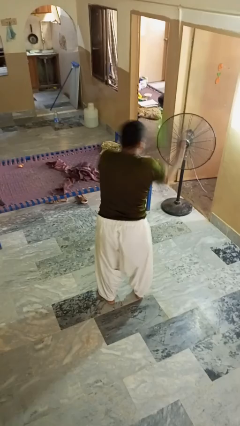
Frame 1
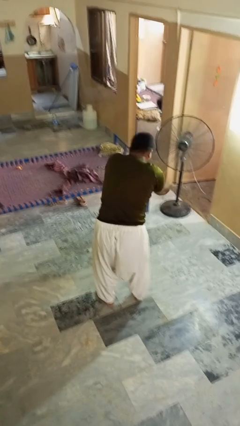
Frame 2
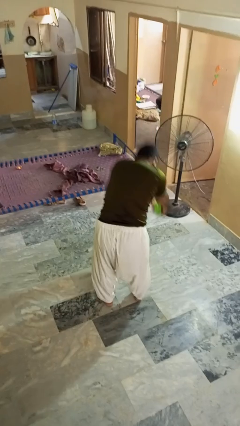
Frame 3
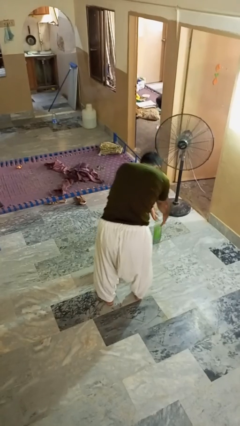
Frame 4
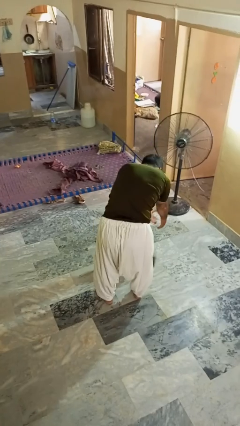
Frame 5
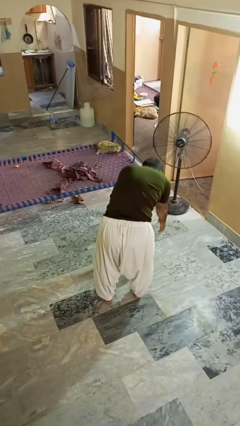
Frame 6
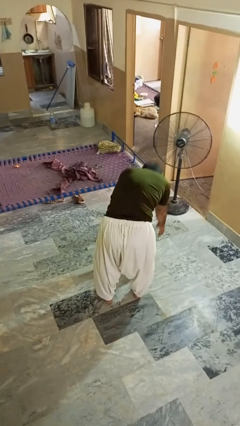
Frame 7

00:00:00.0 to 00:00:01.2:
person catches dropped object

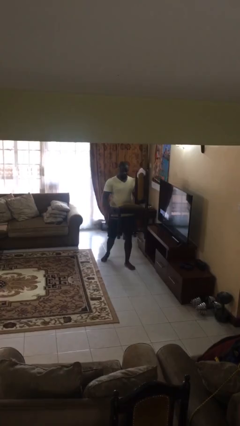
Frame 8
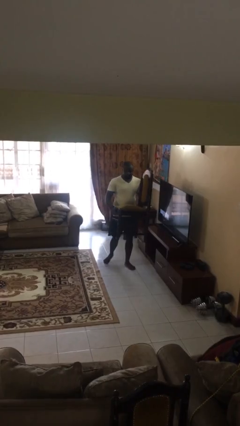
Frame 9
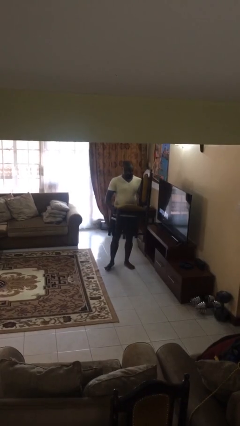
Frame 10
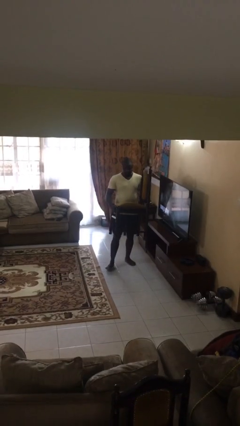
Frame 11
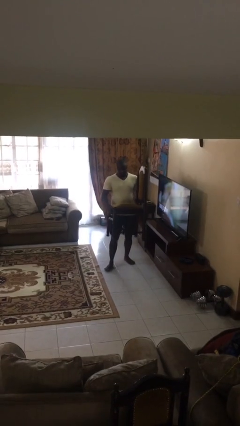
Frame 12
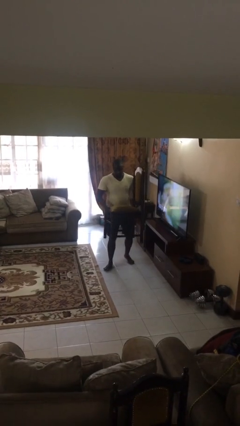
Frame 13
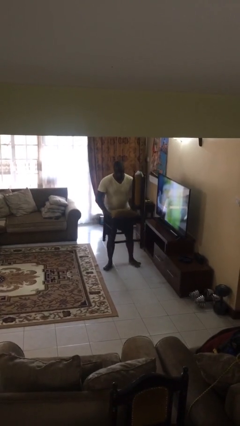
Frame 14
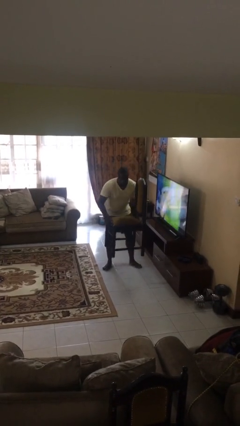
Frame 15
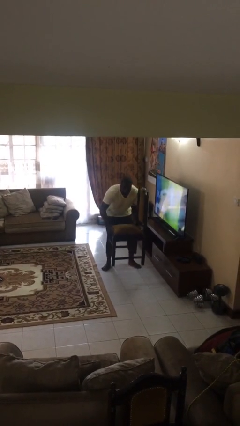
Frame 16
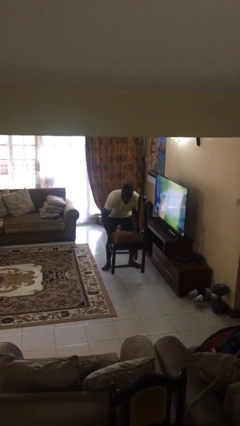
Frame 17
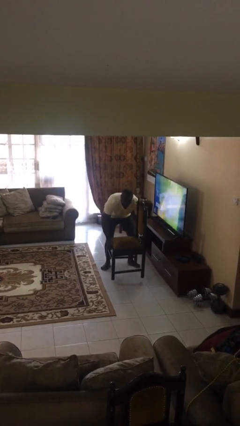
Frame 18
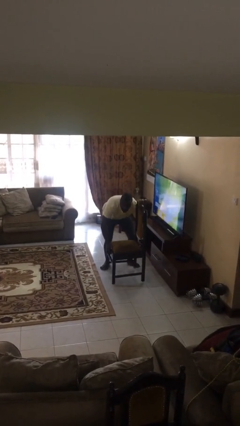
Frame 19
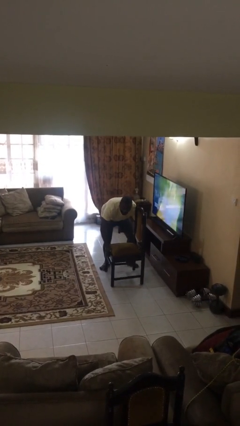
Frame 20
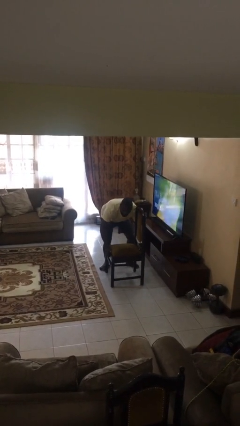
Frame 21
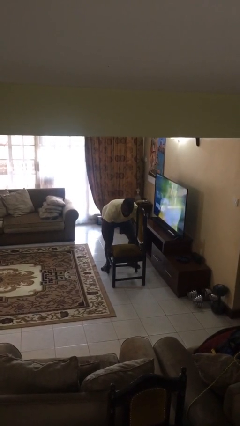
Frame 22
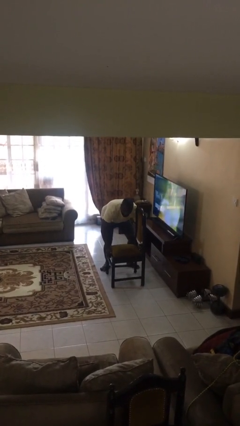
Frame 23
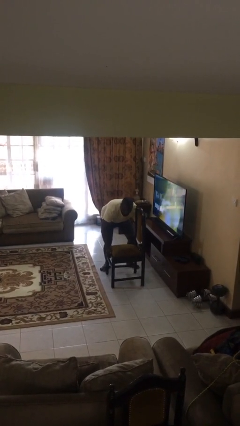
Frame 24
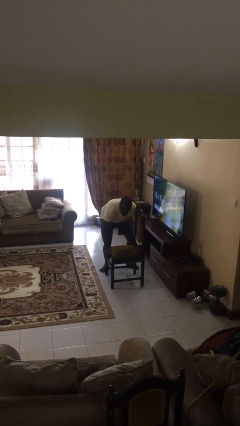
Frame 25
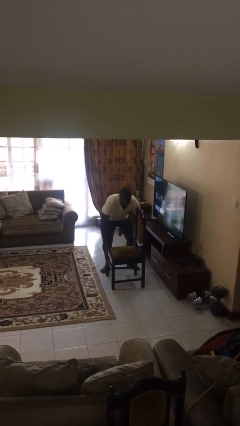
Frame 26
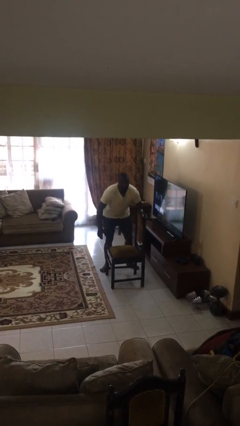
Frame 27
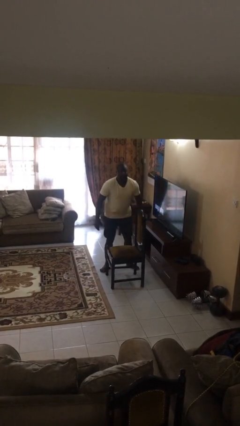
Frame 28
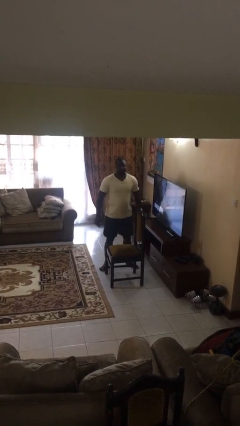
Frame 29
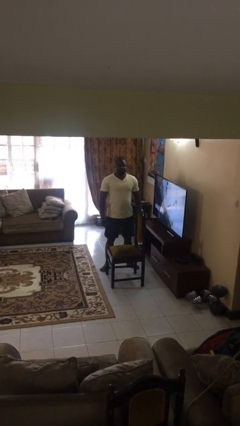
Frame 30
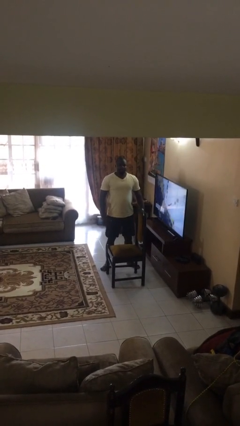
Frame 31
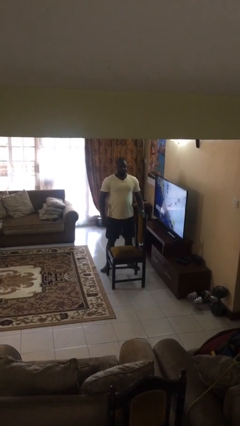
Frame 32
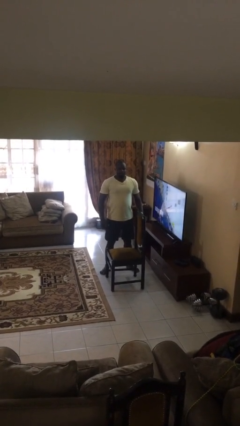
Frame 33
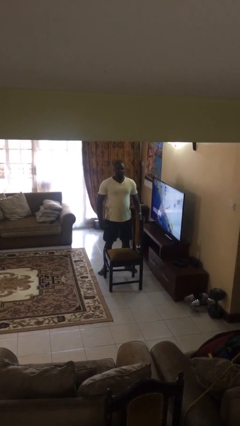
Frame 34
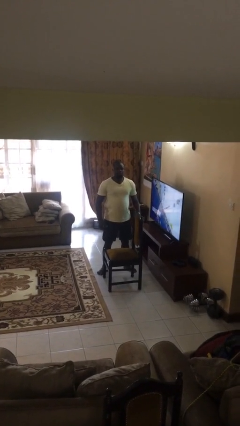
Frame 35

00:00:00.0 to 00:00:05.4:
person puts down object on floor

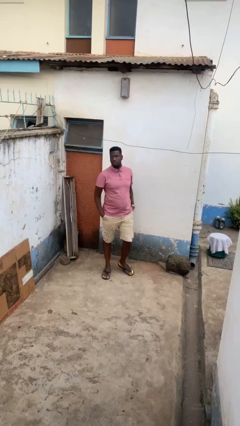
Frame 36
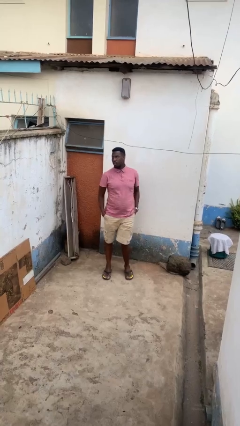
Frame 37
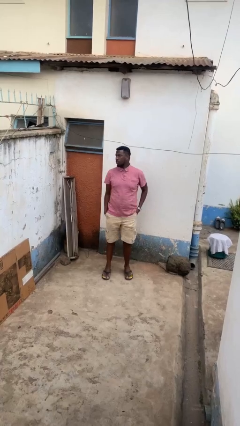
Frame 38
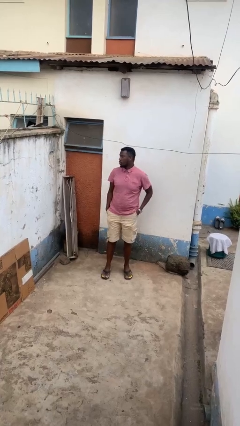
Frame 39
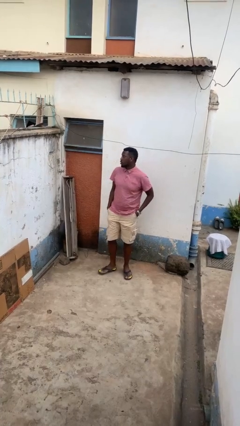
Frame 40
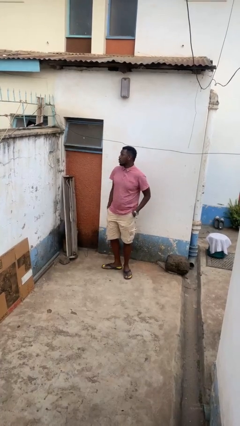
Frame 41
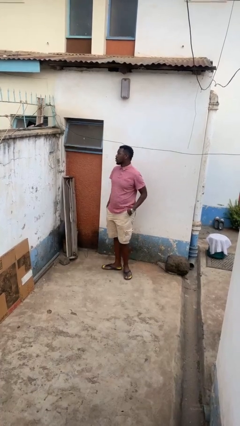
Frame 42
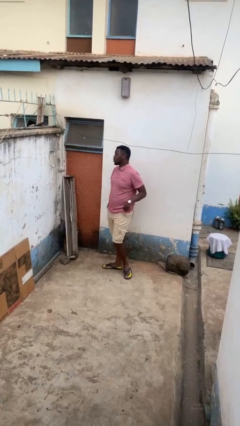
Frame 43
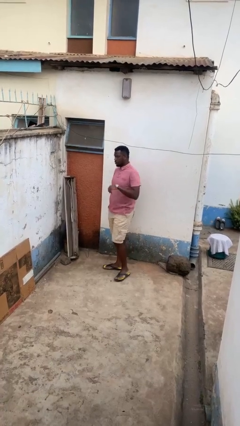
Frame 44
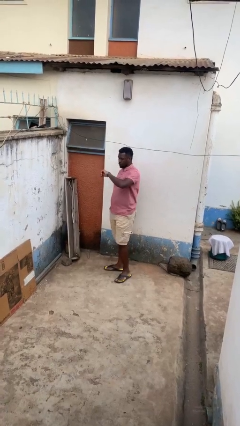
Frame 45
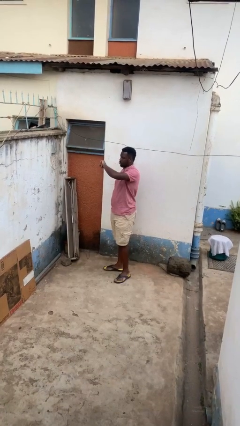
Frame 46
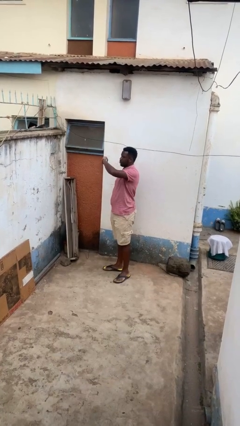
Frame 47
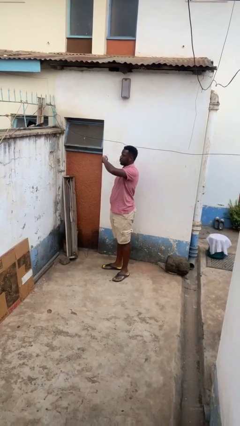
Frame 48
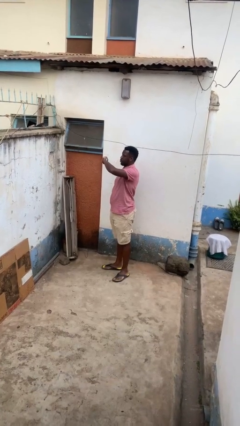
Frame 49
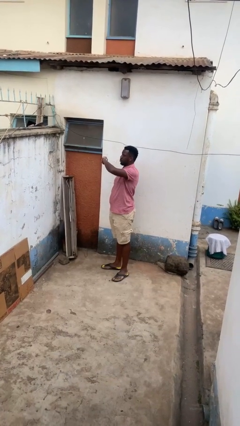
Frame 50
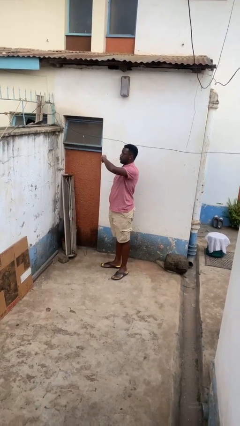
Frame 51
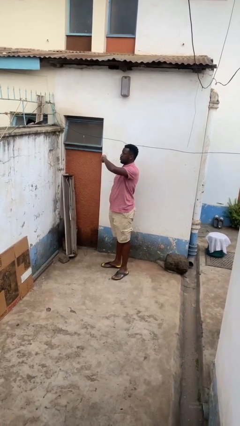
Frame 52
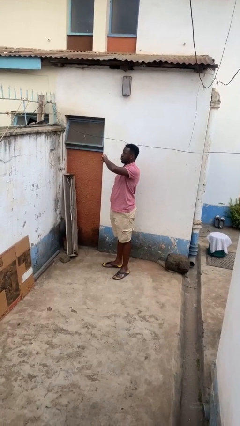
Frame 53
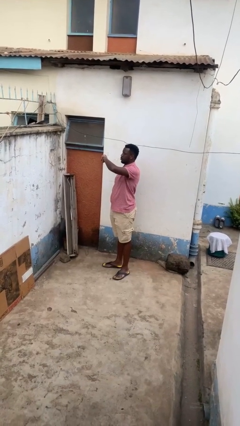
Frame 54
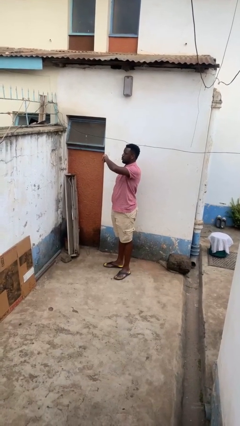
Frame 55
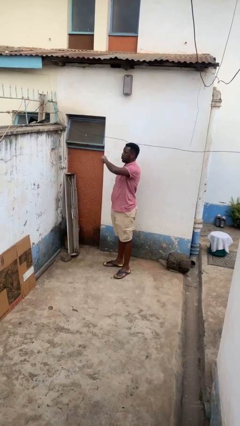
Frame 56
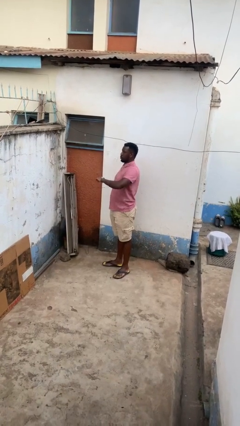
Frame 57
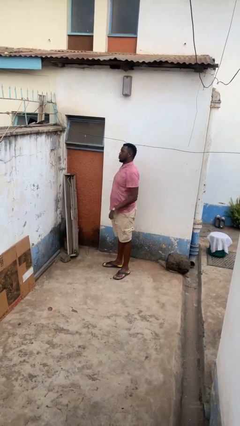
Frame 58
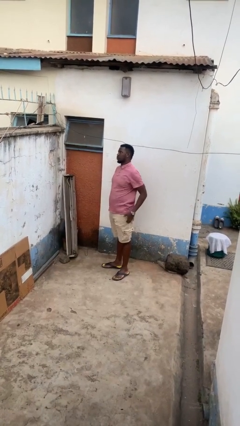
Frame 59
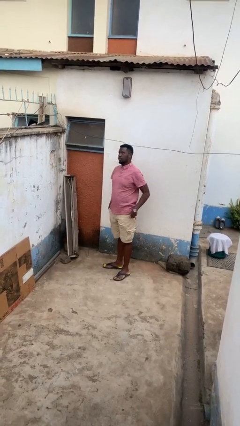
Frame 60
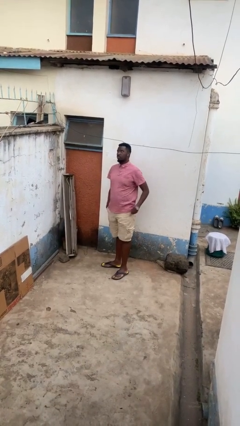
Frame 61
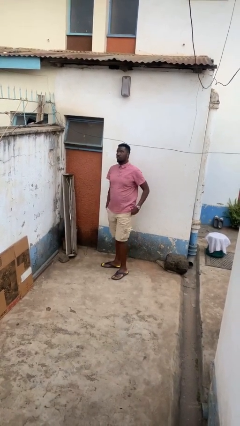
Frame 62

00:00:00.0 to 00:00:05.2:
person looks at wristwatch

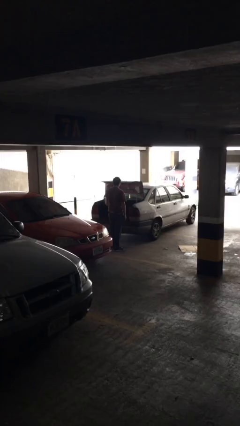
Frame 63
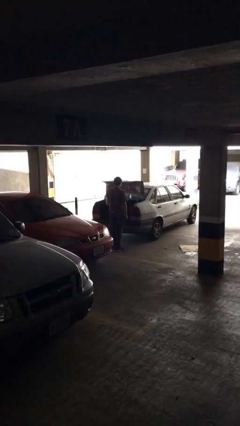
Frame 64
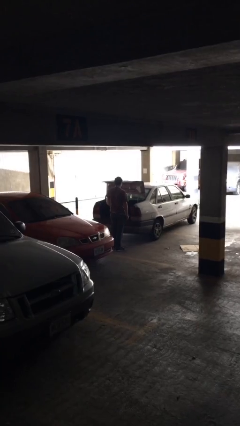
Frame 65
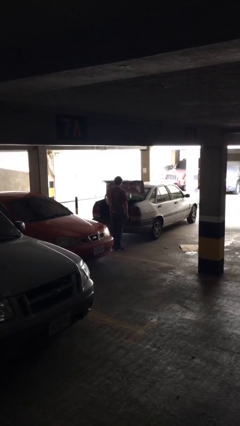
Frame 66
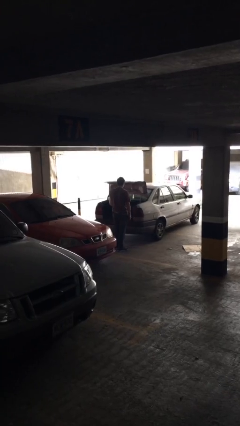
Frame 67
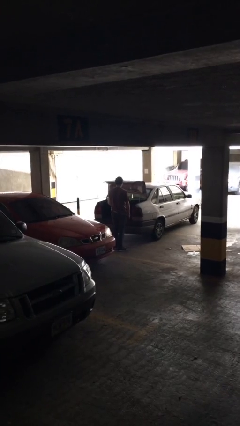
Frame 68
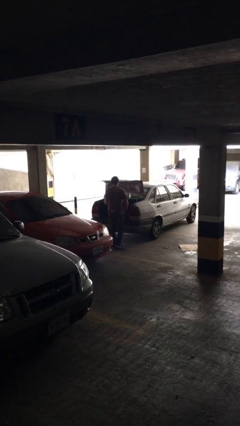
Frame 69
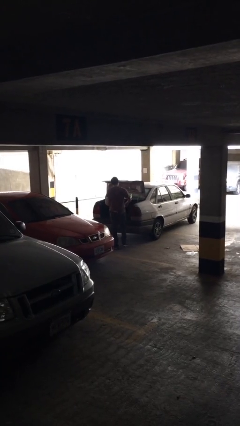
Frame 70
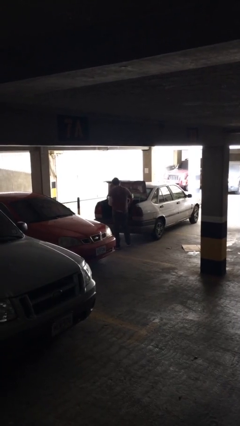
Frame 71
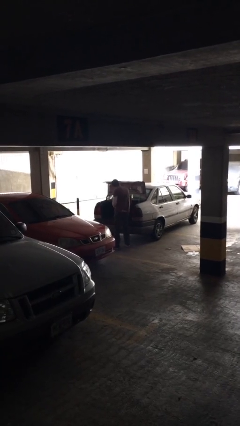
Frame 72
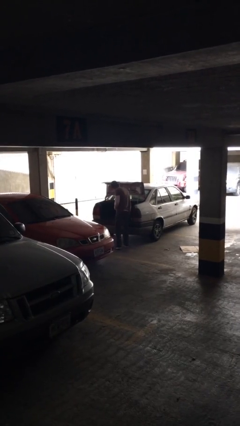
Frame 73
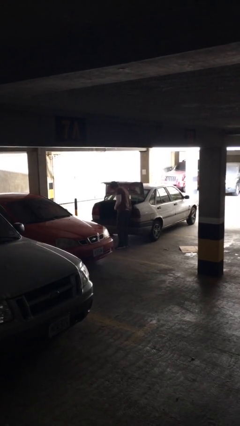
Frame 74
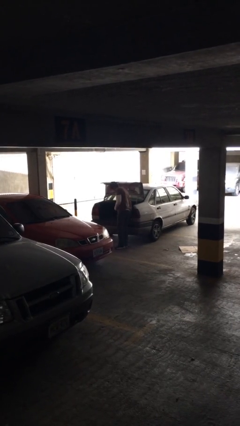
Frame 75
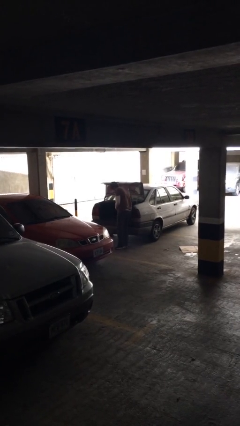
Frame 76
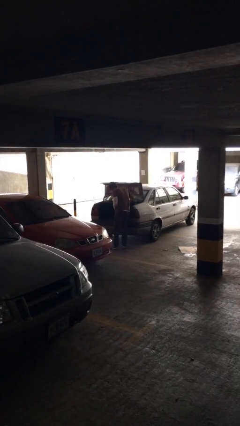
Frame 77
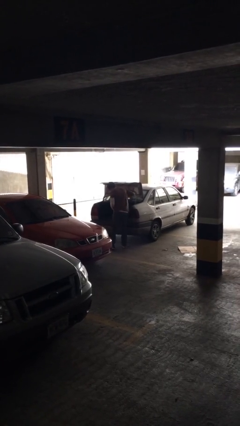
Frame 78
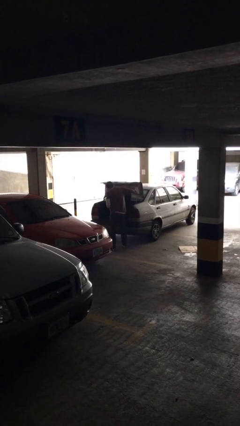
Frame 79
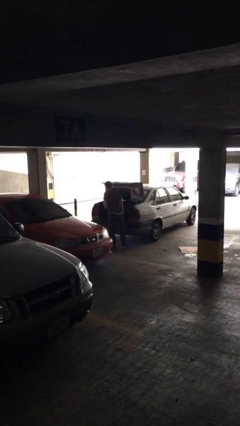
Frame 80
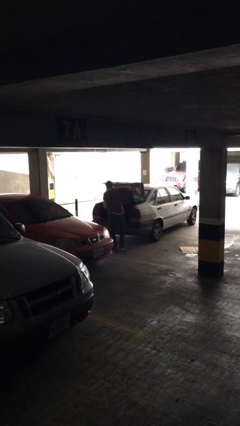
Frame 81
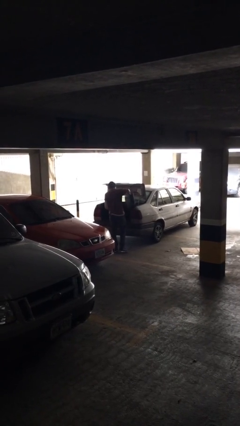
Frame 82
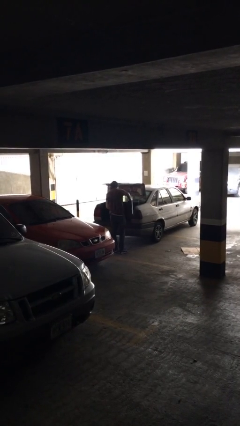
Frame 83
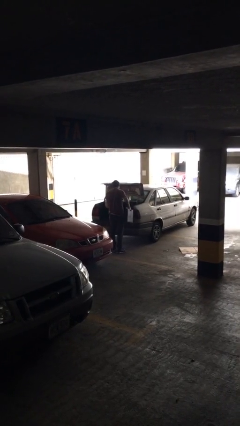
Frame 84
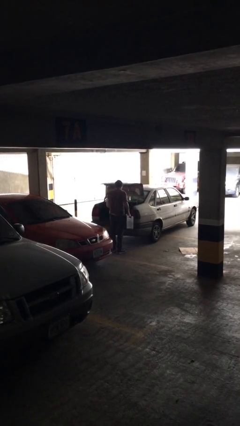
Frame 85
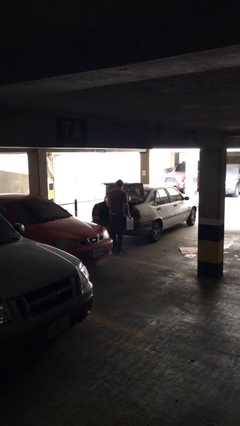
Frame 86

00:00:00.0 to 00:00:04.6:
person unloads car

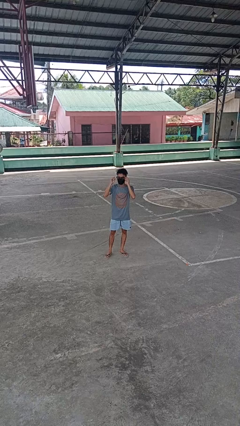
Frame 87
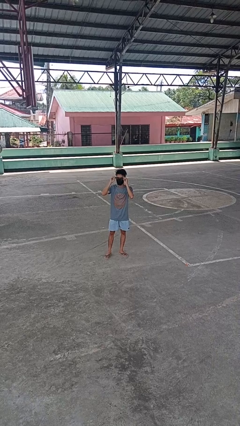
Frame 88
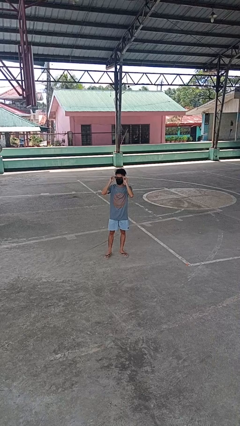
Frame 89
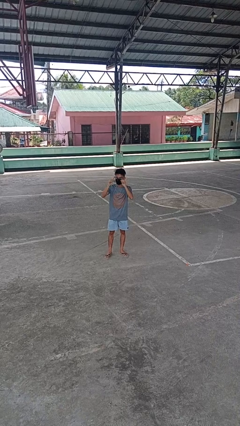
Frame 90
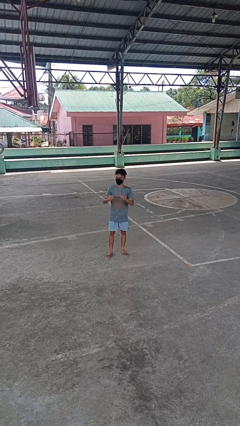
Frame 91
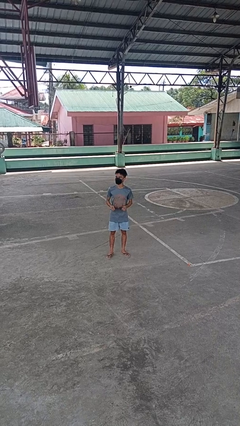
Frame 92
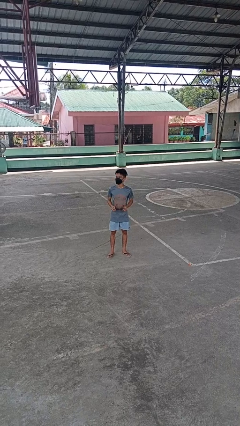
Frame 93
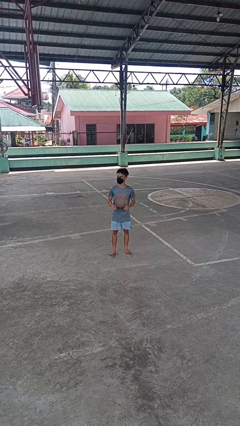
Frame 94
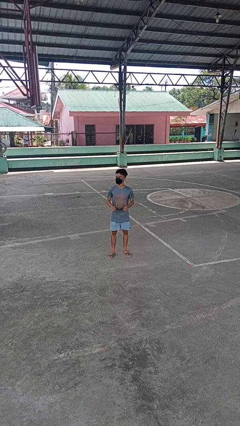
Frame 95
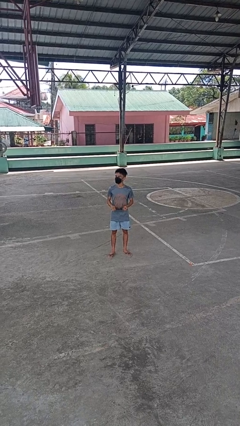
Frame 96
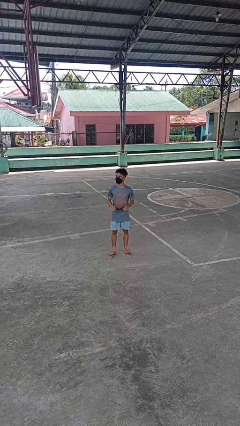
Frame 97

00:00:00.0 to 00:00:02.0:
person takes off glasses
